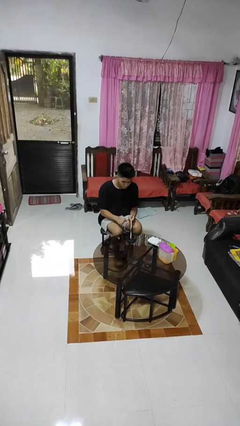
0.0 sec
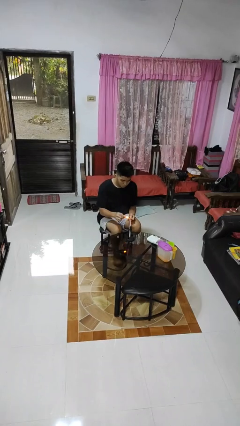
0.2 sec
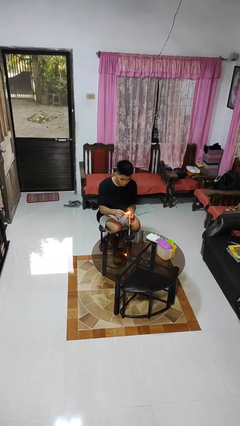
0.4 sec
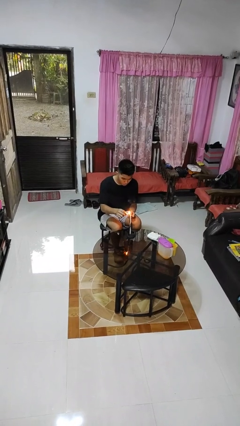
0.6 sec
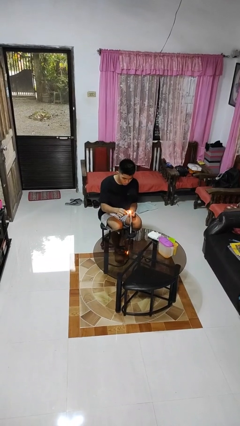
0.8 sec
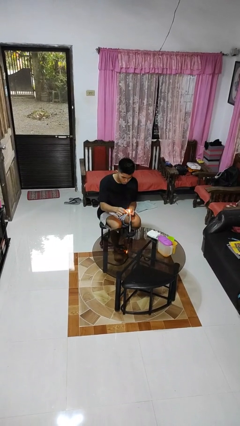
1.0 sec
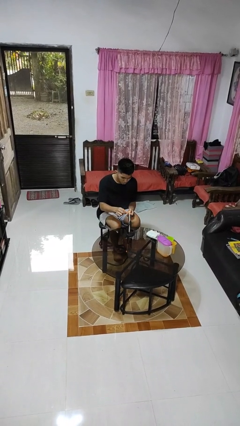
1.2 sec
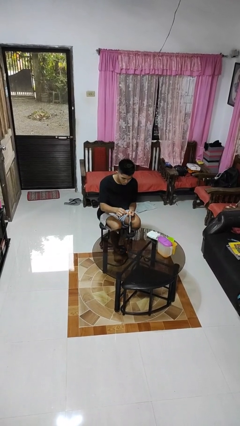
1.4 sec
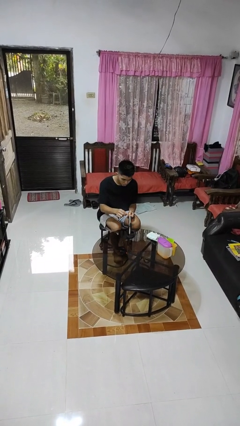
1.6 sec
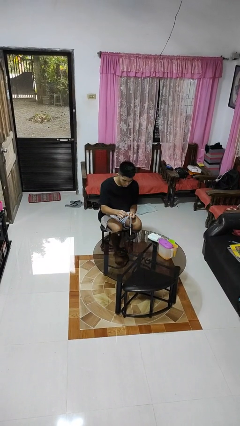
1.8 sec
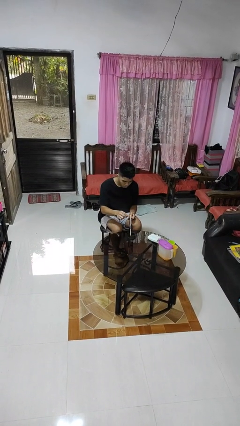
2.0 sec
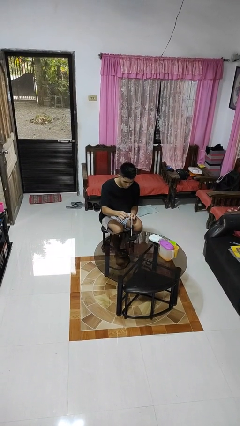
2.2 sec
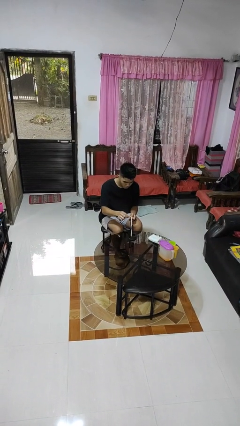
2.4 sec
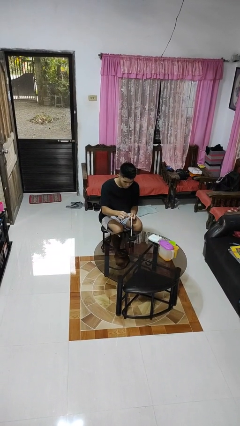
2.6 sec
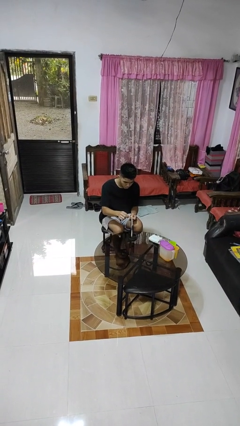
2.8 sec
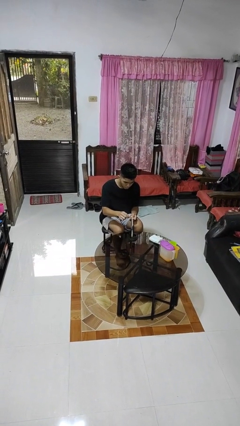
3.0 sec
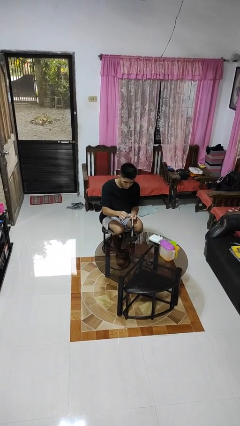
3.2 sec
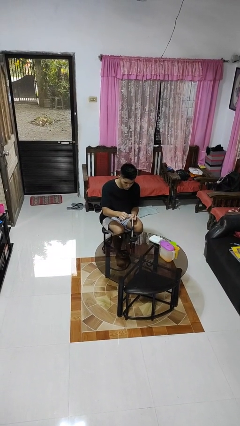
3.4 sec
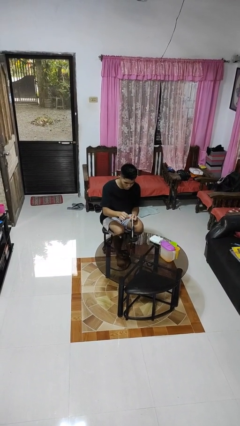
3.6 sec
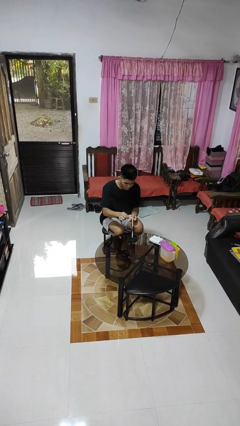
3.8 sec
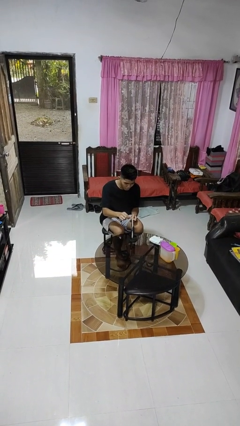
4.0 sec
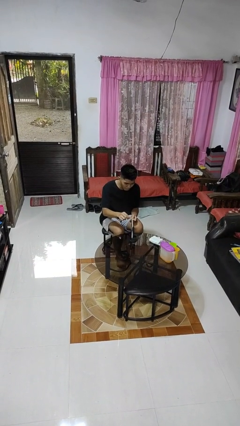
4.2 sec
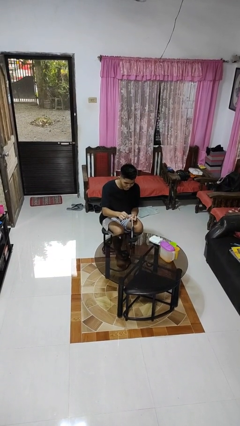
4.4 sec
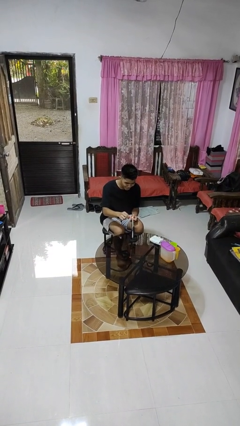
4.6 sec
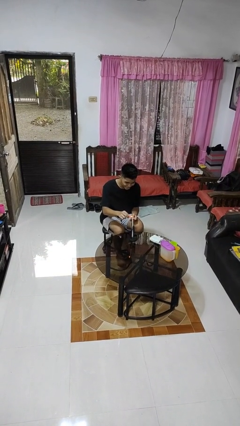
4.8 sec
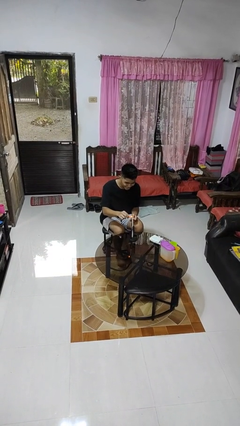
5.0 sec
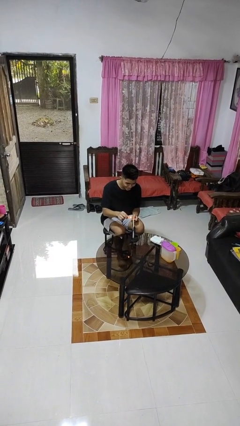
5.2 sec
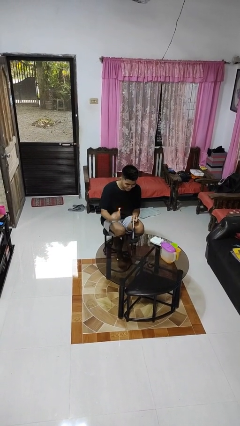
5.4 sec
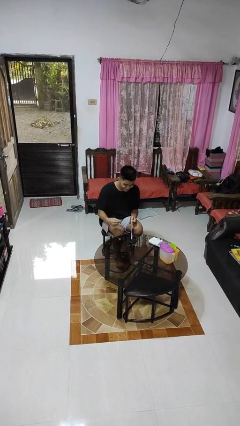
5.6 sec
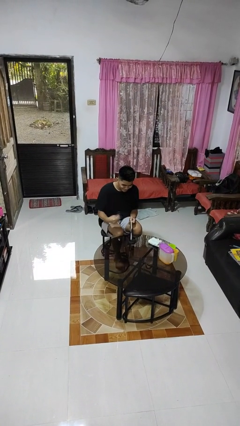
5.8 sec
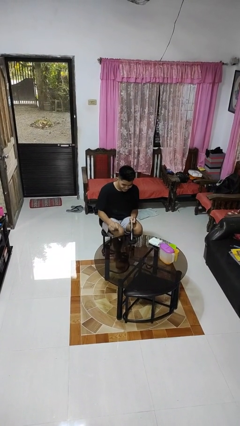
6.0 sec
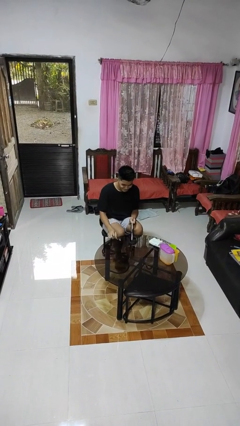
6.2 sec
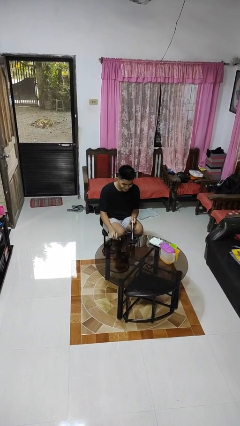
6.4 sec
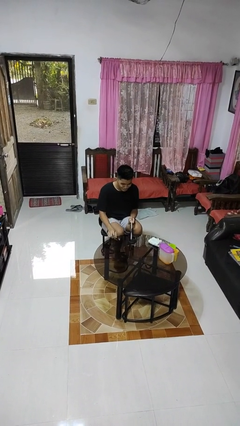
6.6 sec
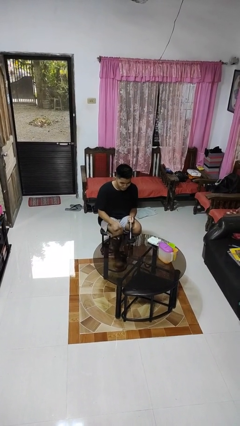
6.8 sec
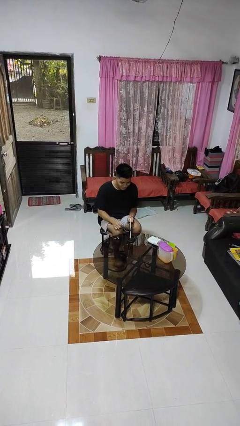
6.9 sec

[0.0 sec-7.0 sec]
person lights candle

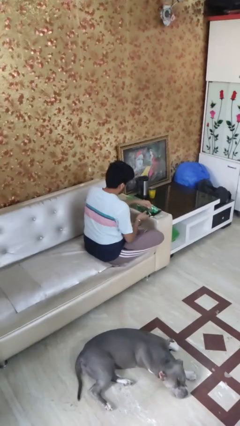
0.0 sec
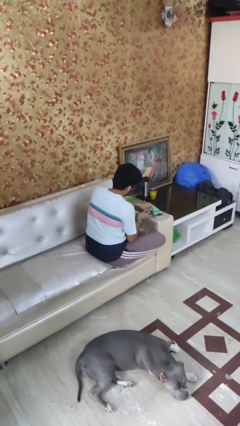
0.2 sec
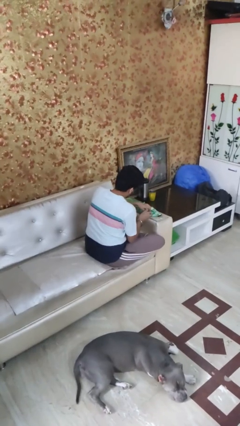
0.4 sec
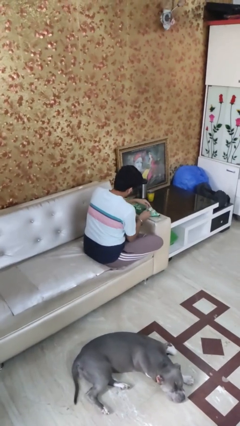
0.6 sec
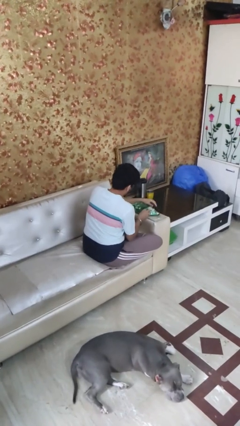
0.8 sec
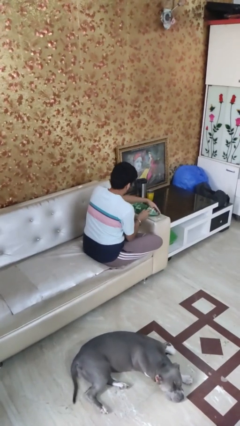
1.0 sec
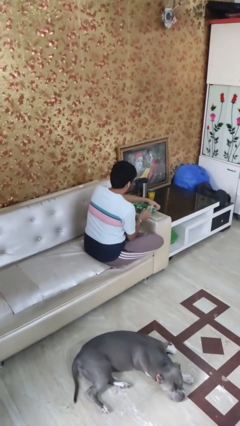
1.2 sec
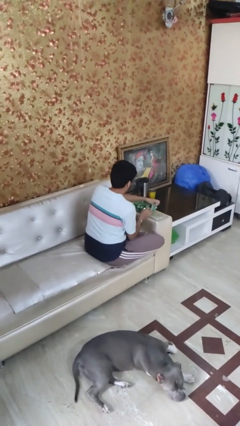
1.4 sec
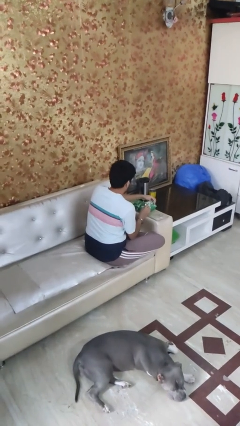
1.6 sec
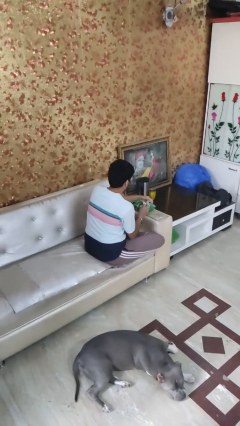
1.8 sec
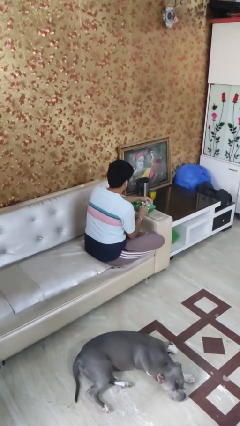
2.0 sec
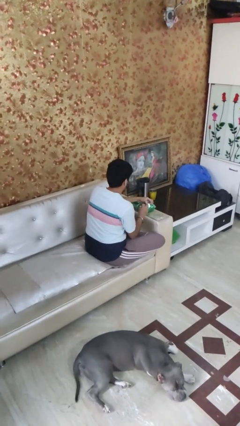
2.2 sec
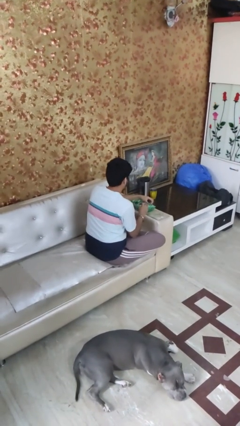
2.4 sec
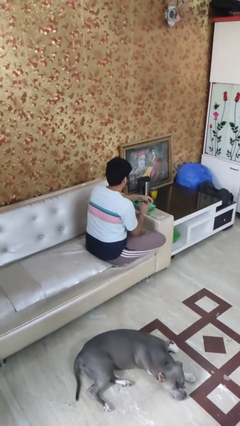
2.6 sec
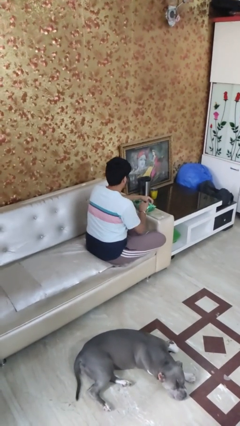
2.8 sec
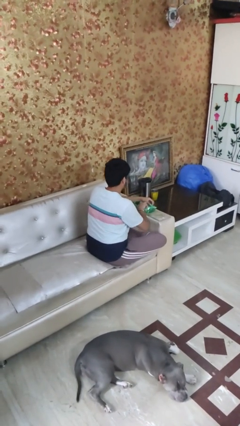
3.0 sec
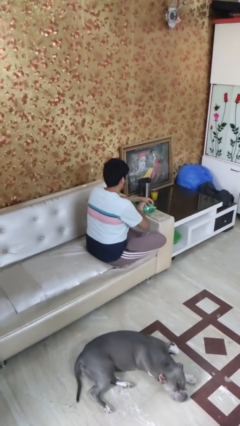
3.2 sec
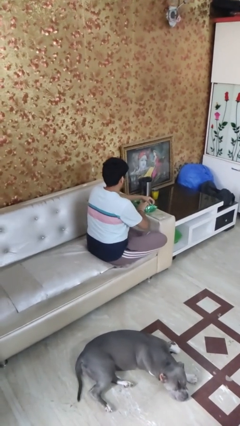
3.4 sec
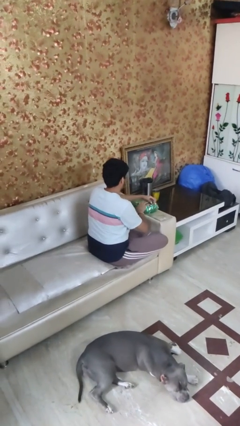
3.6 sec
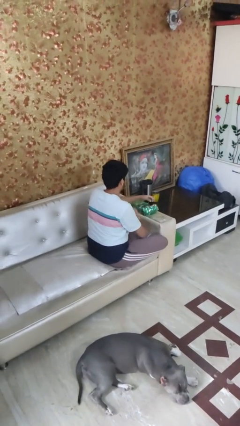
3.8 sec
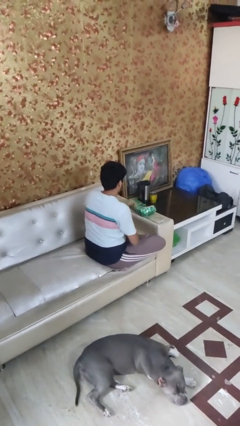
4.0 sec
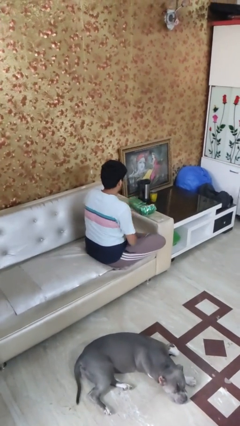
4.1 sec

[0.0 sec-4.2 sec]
person wraps box

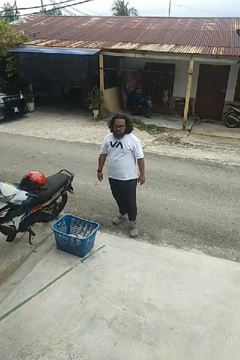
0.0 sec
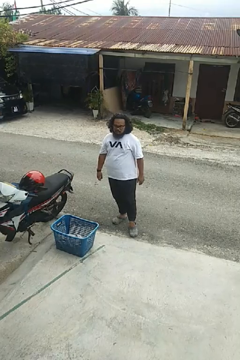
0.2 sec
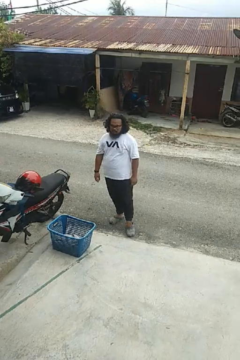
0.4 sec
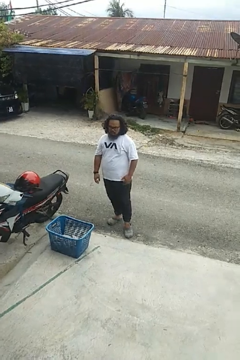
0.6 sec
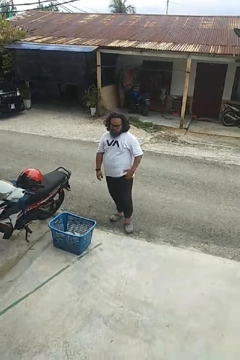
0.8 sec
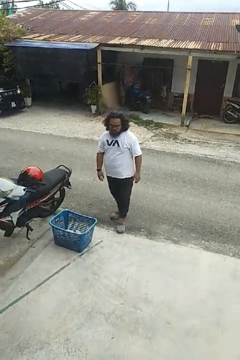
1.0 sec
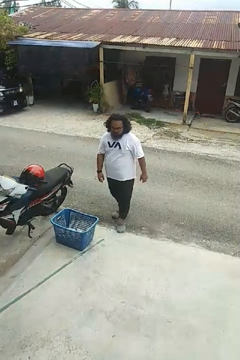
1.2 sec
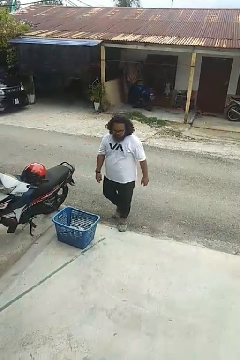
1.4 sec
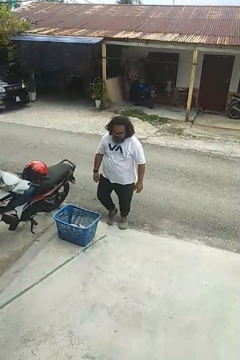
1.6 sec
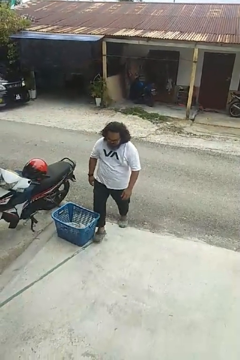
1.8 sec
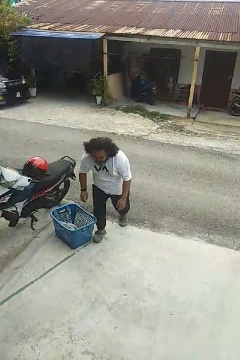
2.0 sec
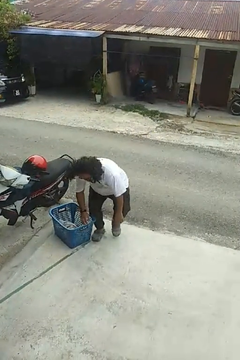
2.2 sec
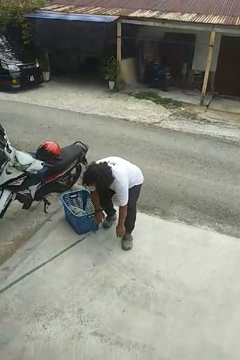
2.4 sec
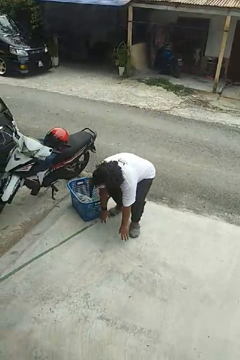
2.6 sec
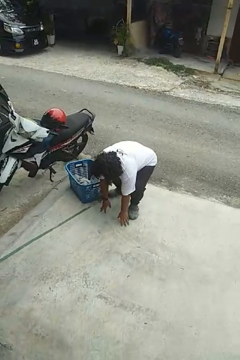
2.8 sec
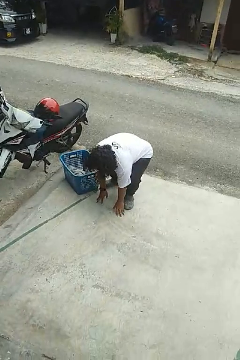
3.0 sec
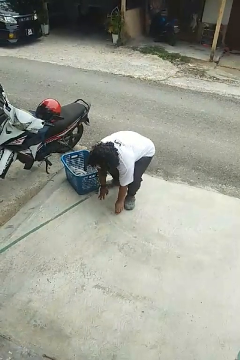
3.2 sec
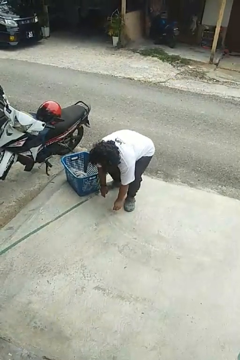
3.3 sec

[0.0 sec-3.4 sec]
person trips on object on floor

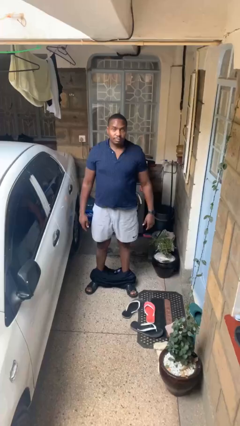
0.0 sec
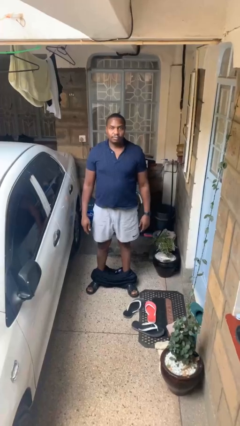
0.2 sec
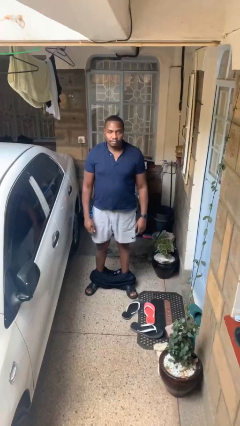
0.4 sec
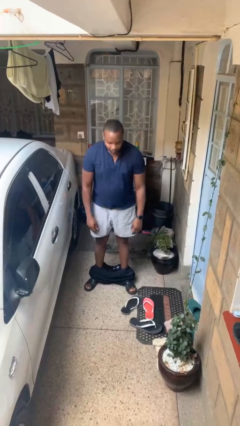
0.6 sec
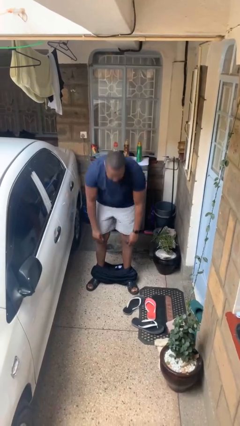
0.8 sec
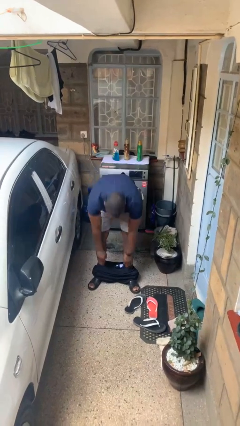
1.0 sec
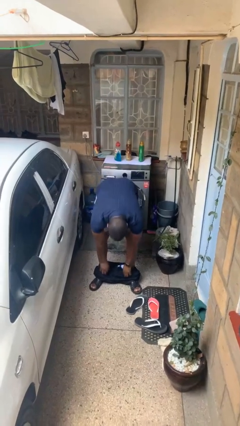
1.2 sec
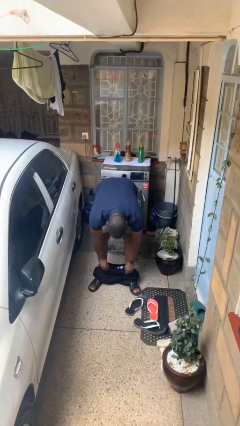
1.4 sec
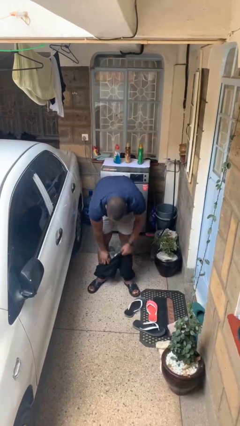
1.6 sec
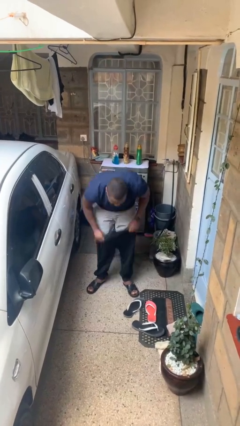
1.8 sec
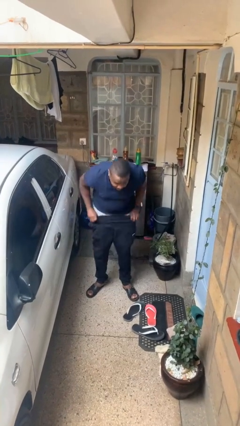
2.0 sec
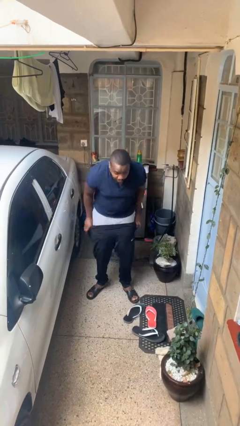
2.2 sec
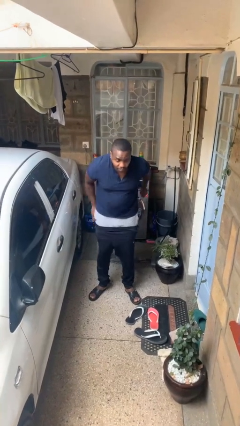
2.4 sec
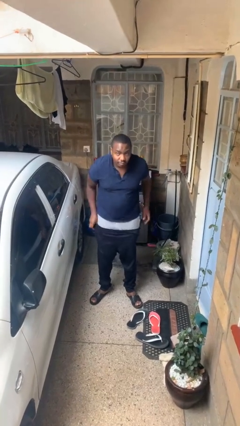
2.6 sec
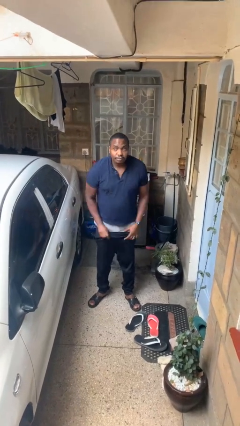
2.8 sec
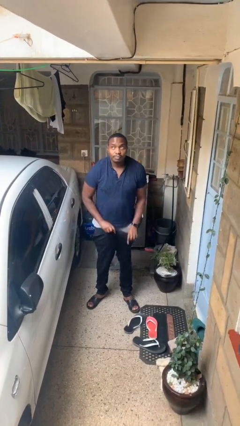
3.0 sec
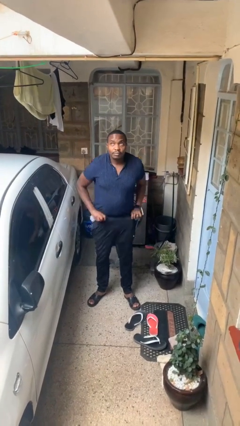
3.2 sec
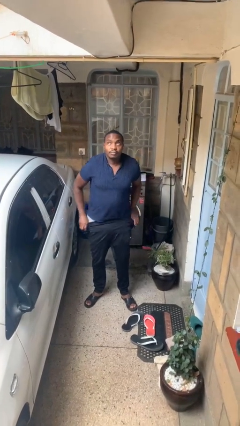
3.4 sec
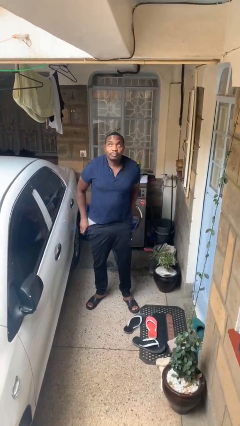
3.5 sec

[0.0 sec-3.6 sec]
person puts on pants
